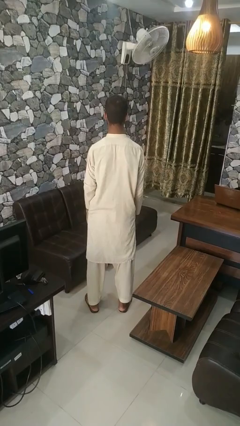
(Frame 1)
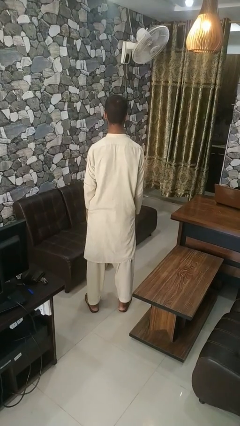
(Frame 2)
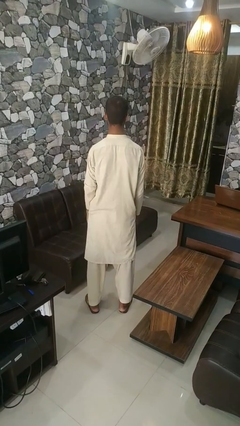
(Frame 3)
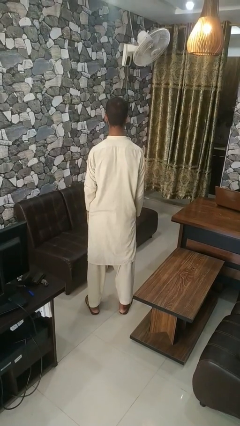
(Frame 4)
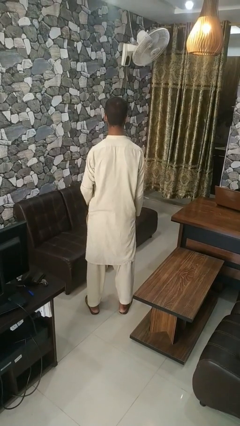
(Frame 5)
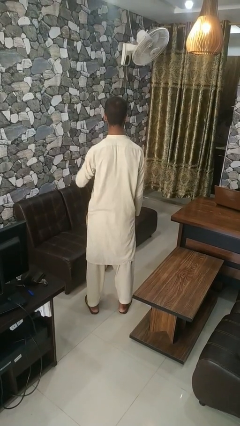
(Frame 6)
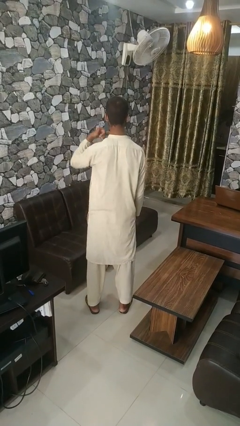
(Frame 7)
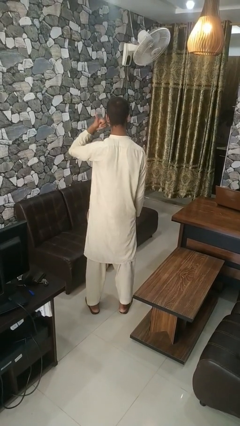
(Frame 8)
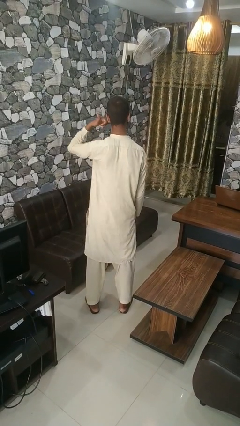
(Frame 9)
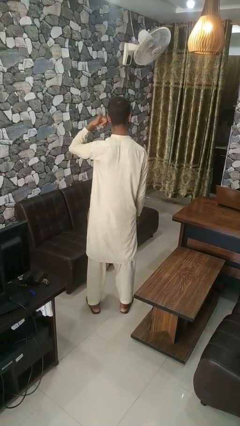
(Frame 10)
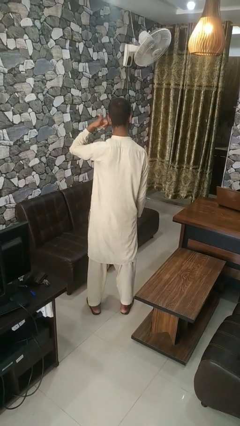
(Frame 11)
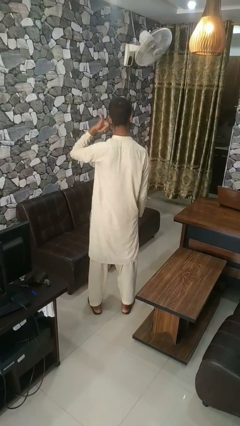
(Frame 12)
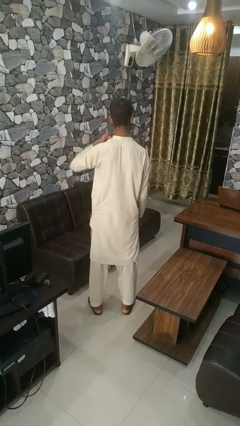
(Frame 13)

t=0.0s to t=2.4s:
person gestures call me

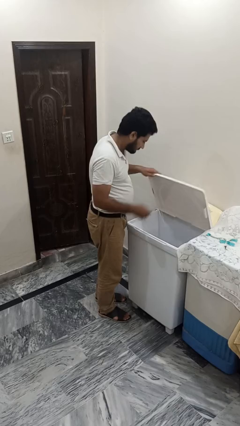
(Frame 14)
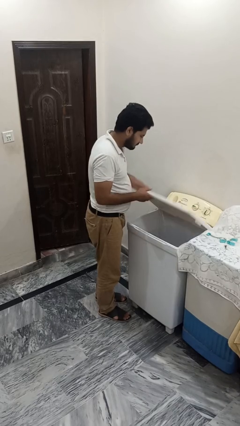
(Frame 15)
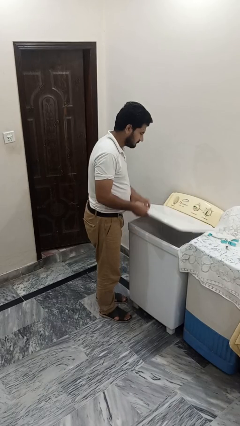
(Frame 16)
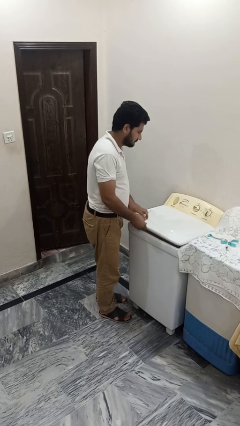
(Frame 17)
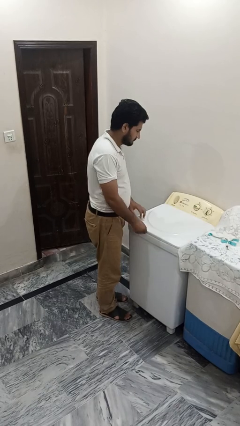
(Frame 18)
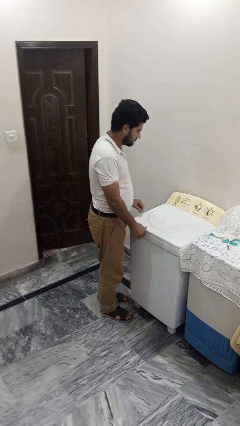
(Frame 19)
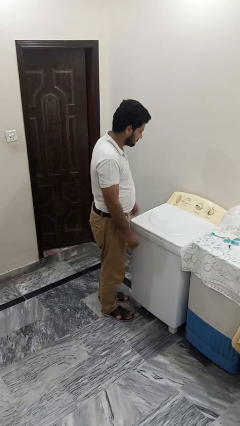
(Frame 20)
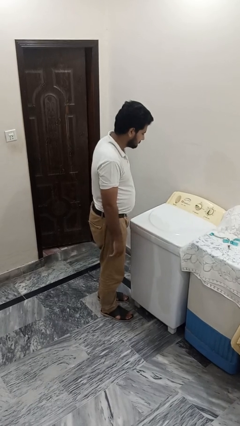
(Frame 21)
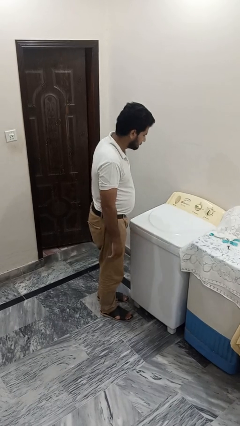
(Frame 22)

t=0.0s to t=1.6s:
person closes clothes washer

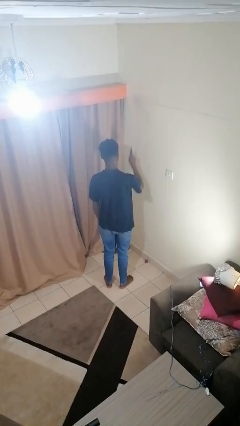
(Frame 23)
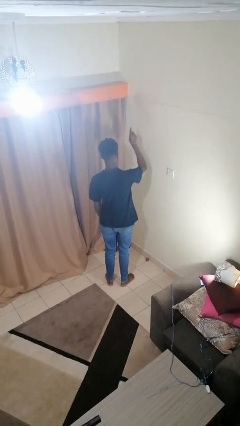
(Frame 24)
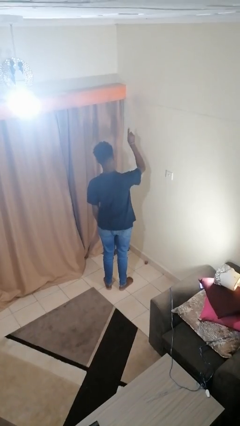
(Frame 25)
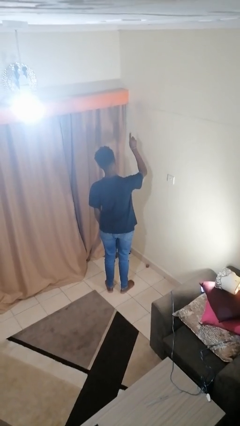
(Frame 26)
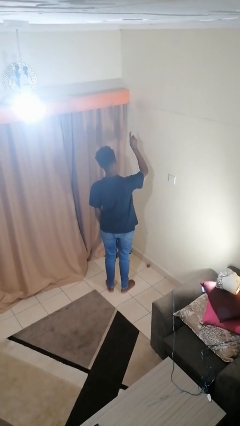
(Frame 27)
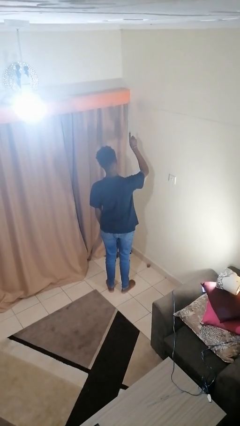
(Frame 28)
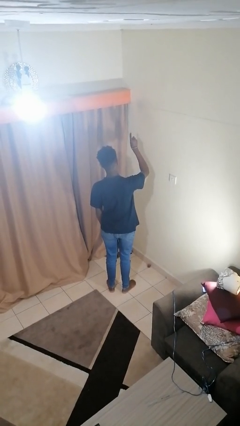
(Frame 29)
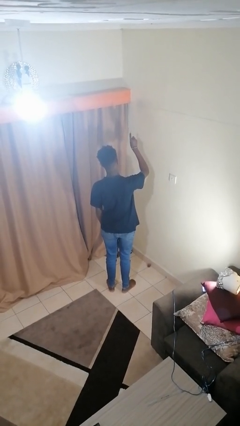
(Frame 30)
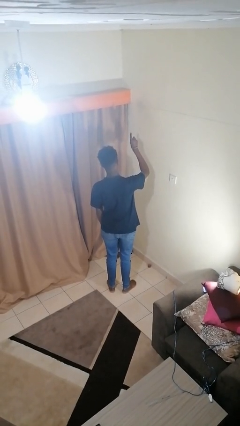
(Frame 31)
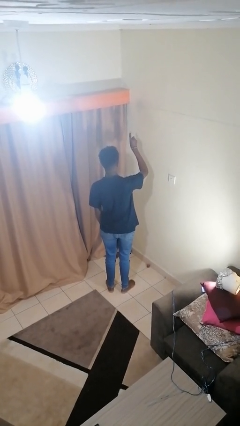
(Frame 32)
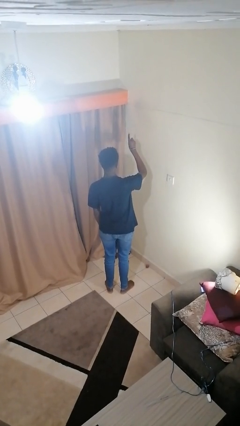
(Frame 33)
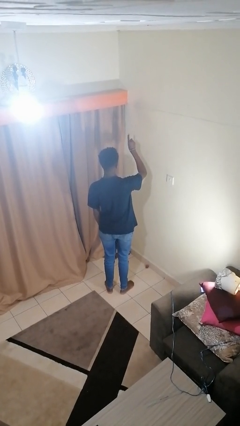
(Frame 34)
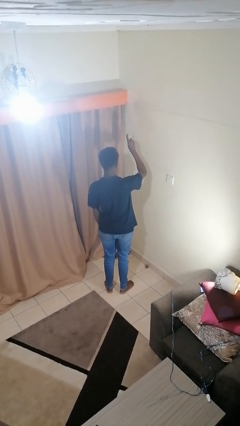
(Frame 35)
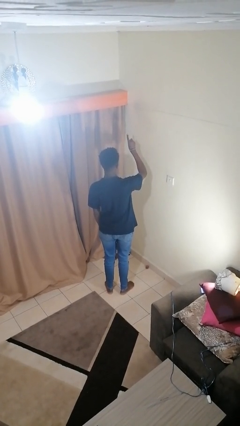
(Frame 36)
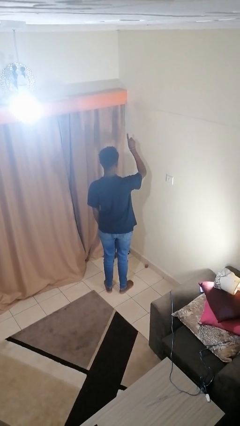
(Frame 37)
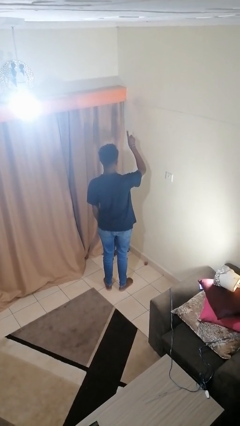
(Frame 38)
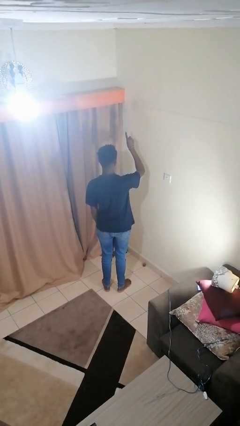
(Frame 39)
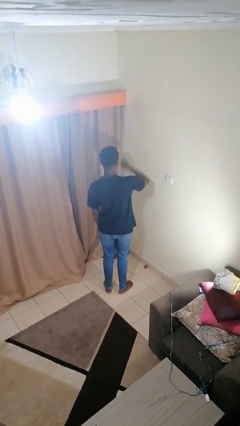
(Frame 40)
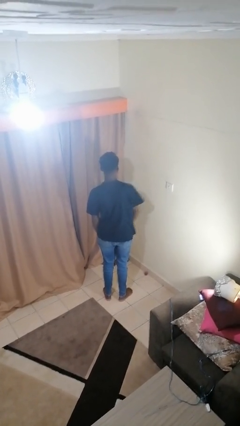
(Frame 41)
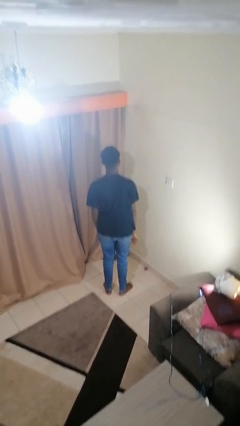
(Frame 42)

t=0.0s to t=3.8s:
person gestures number one

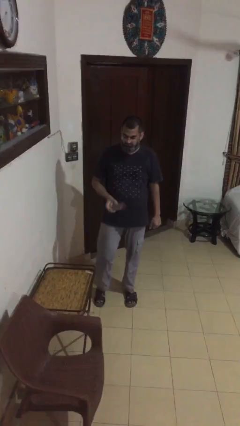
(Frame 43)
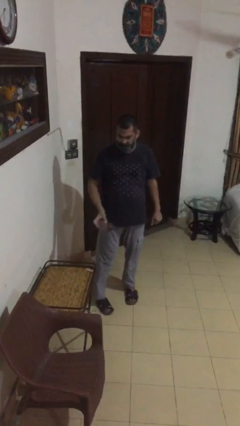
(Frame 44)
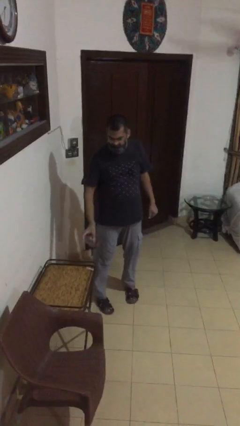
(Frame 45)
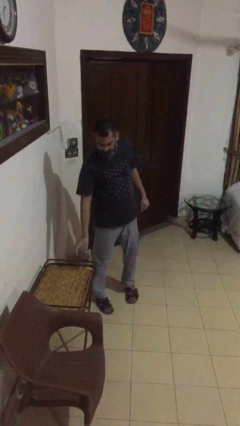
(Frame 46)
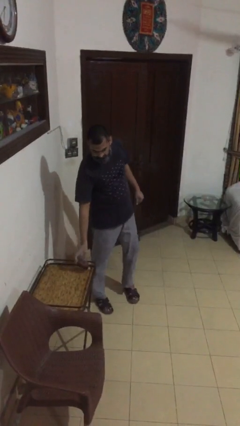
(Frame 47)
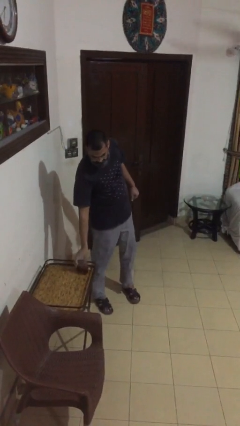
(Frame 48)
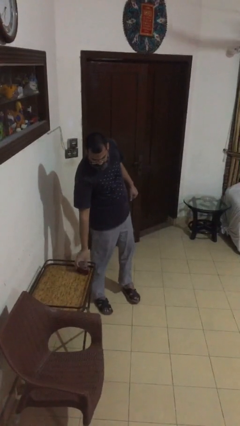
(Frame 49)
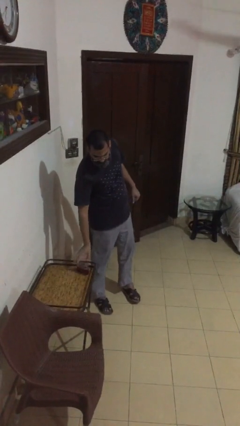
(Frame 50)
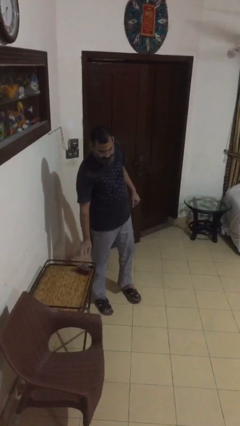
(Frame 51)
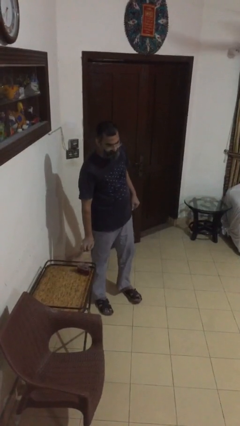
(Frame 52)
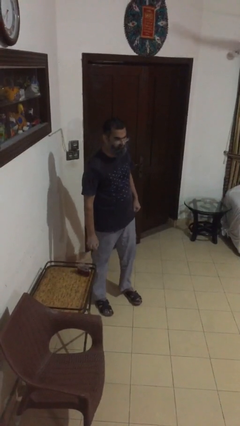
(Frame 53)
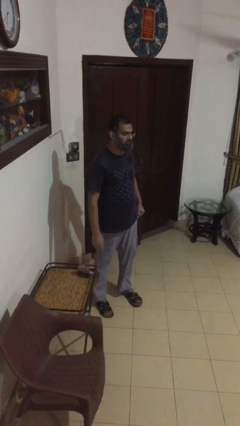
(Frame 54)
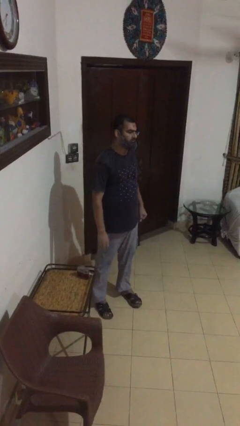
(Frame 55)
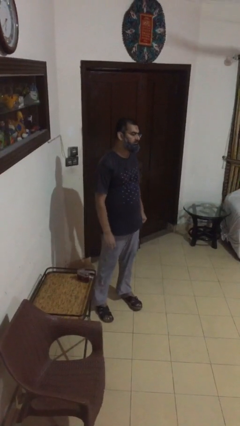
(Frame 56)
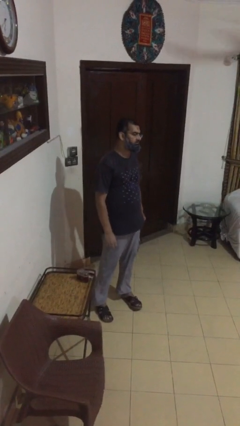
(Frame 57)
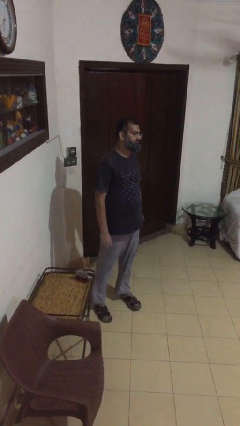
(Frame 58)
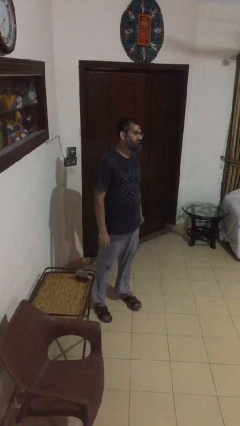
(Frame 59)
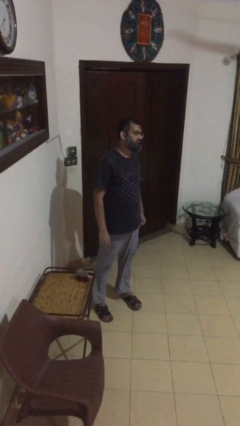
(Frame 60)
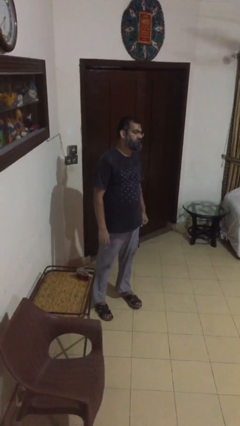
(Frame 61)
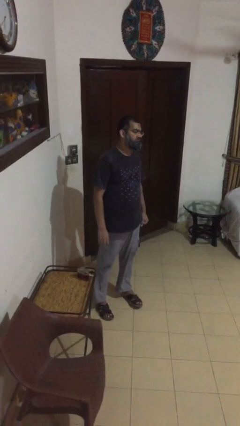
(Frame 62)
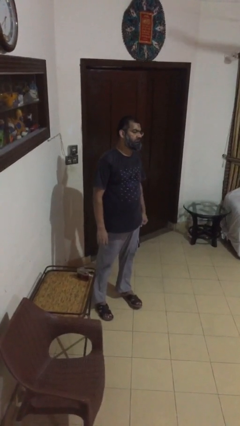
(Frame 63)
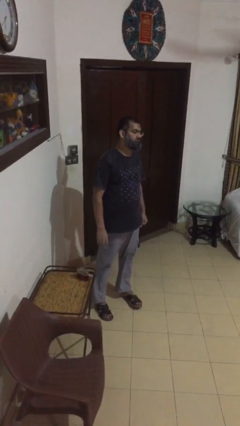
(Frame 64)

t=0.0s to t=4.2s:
person puts down object on table

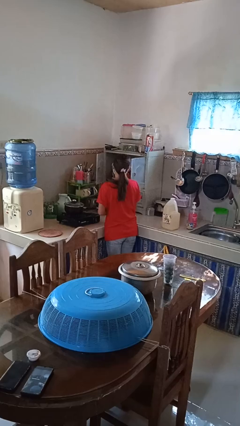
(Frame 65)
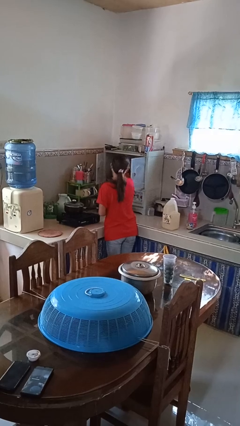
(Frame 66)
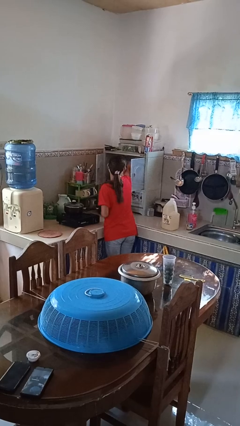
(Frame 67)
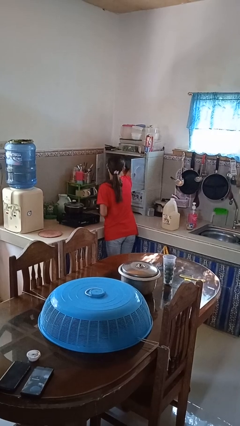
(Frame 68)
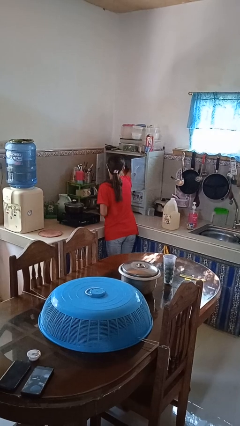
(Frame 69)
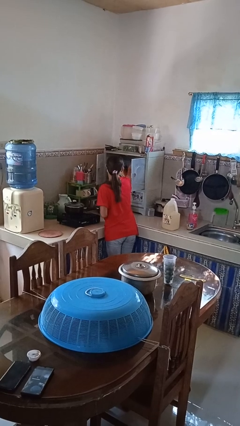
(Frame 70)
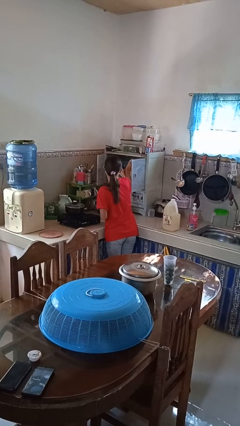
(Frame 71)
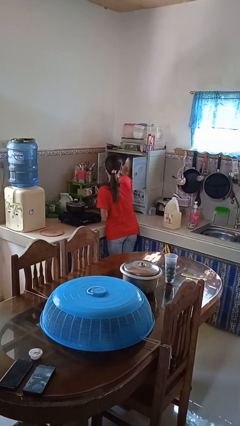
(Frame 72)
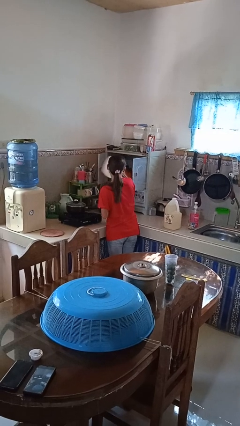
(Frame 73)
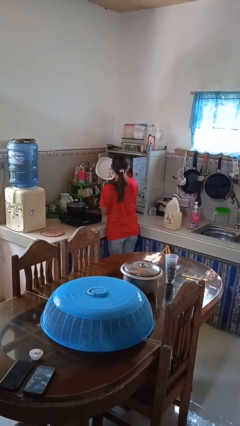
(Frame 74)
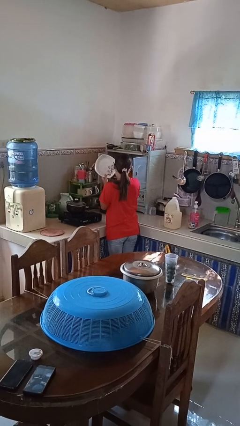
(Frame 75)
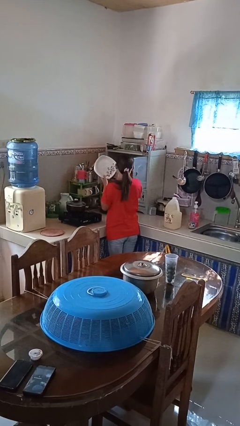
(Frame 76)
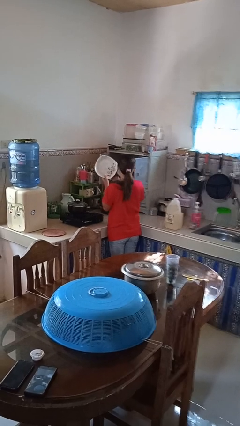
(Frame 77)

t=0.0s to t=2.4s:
person takes object from cabinet

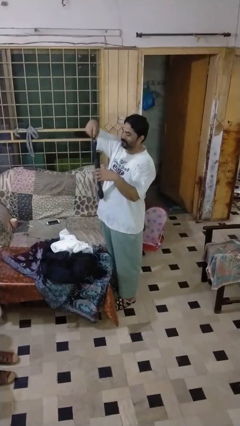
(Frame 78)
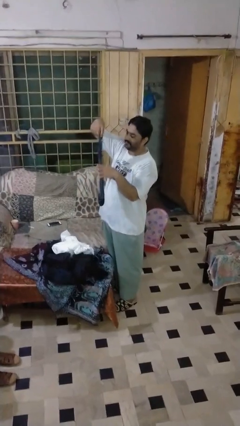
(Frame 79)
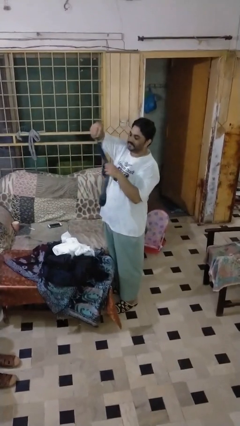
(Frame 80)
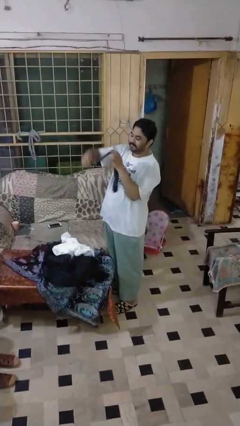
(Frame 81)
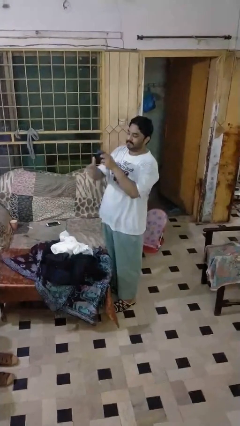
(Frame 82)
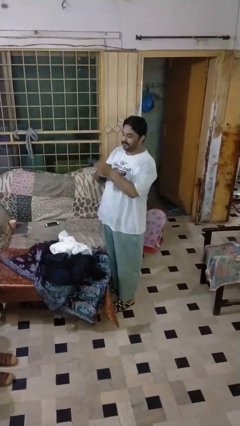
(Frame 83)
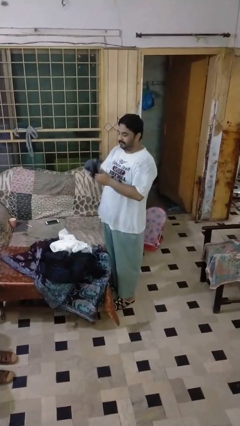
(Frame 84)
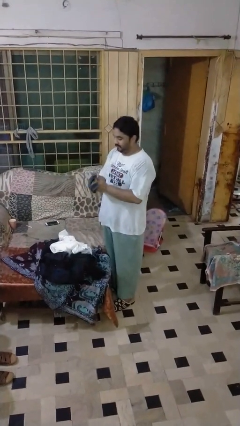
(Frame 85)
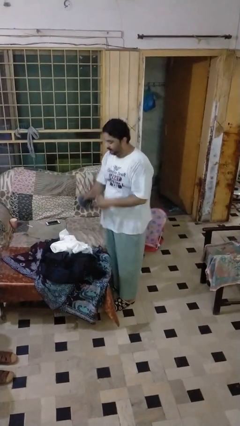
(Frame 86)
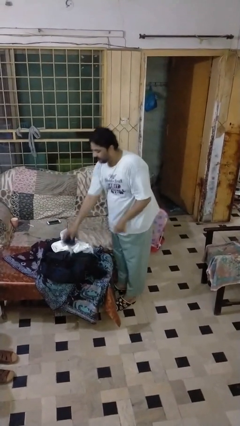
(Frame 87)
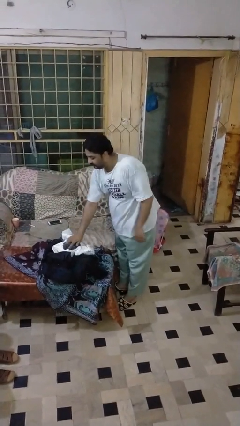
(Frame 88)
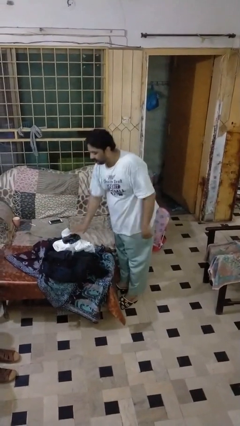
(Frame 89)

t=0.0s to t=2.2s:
person folds socks

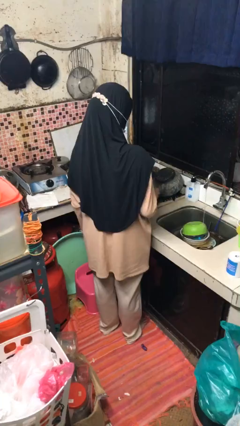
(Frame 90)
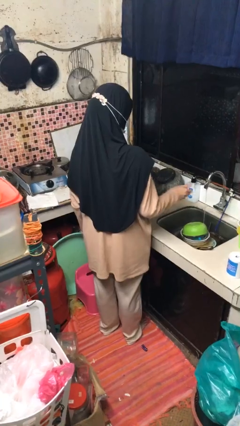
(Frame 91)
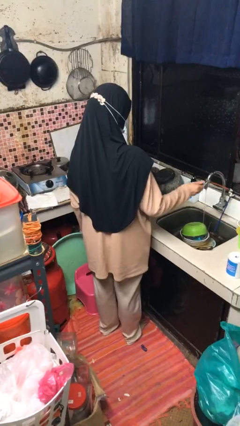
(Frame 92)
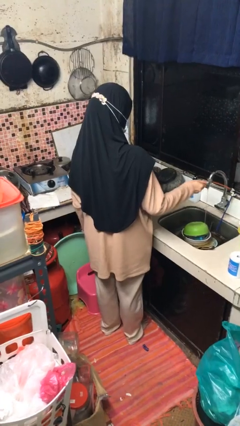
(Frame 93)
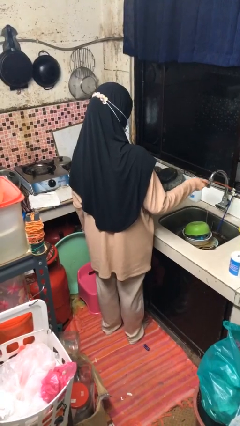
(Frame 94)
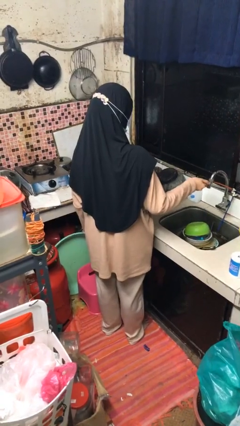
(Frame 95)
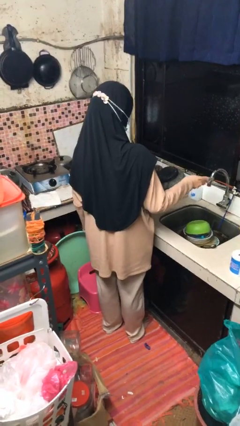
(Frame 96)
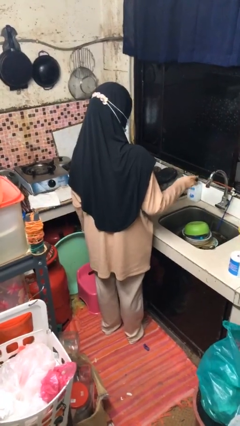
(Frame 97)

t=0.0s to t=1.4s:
person turns off faucet
